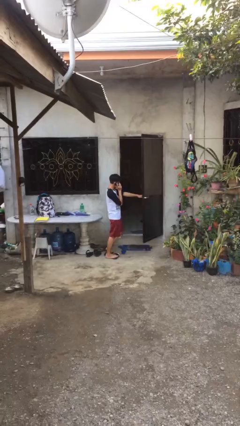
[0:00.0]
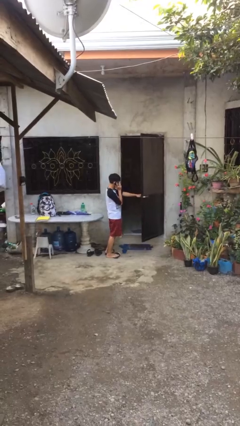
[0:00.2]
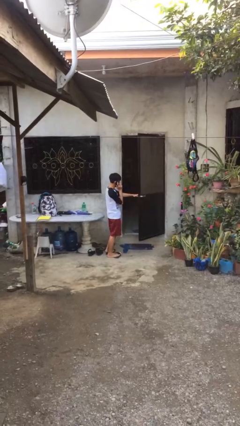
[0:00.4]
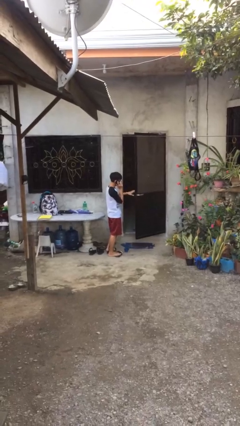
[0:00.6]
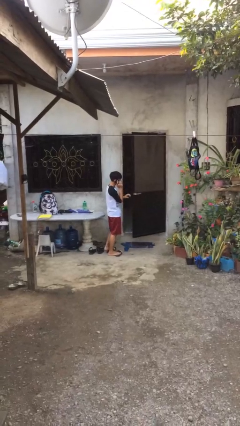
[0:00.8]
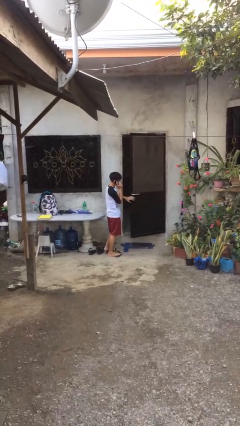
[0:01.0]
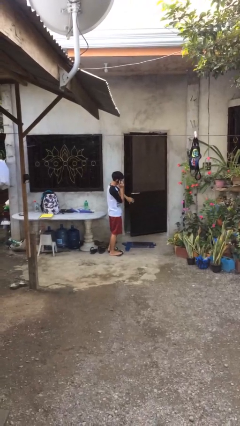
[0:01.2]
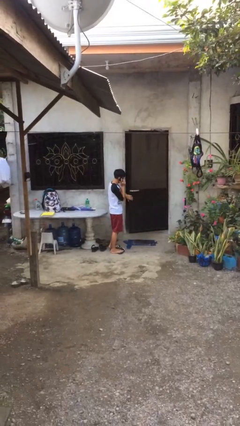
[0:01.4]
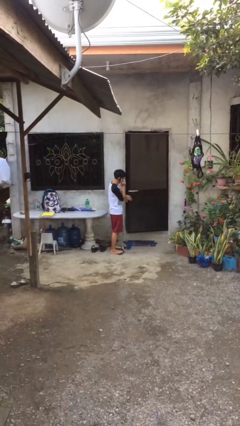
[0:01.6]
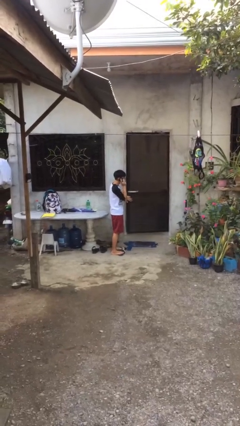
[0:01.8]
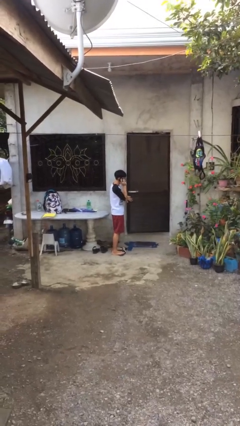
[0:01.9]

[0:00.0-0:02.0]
person closes facility door

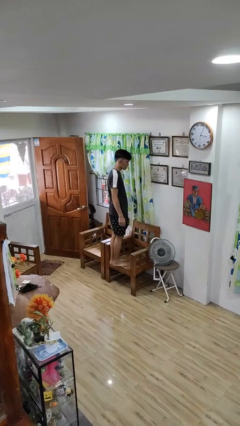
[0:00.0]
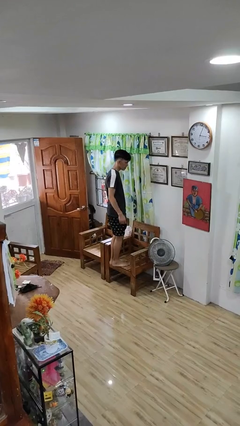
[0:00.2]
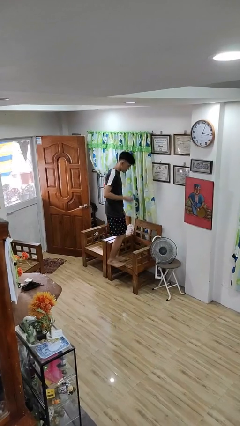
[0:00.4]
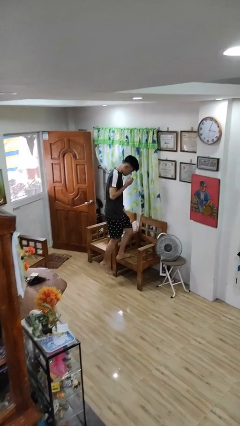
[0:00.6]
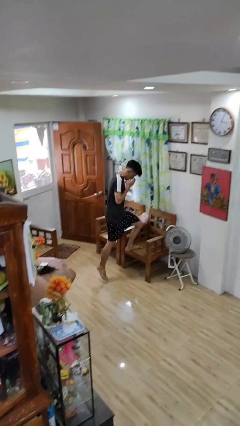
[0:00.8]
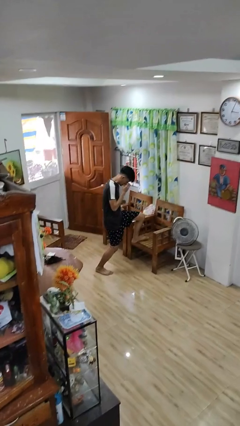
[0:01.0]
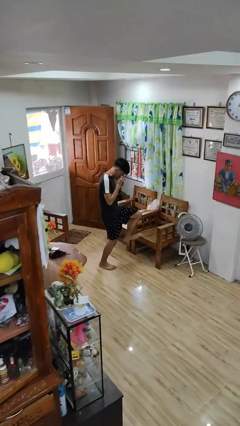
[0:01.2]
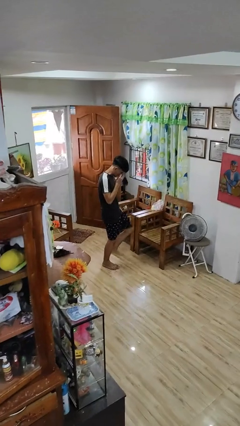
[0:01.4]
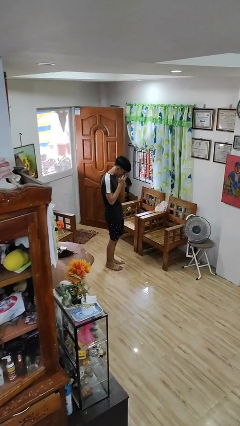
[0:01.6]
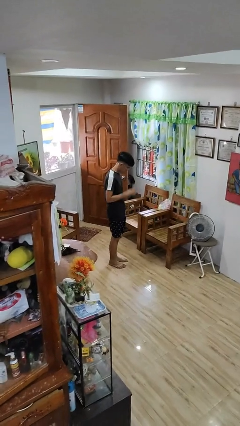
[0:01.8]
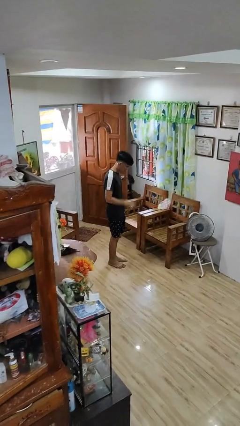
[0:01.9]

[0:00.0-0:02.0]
person climbs off chair

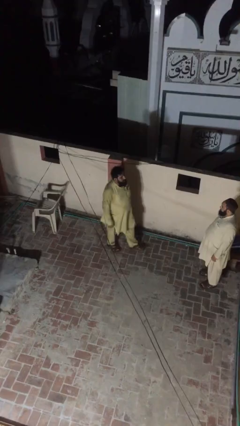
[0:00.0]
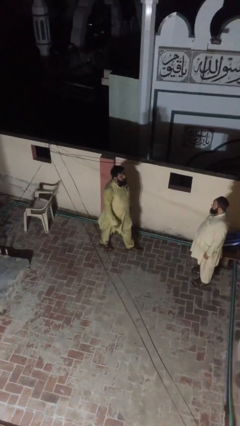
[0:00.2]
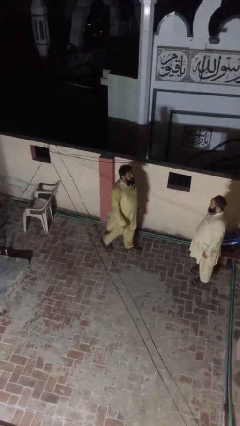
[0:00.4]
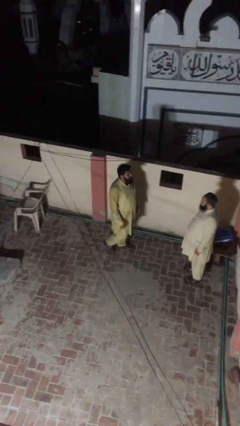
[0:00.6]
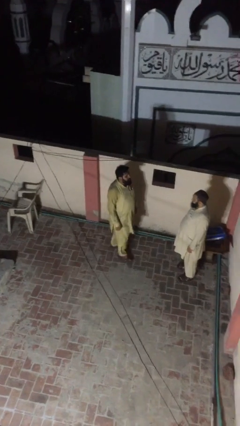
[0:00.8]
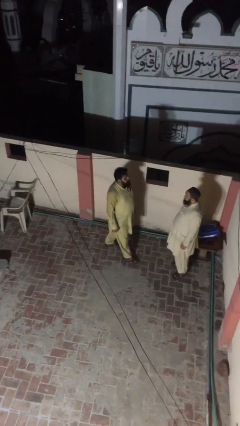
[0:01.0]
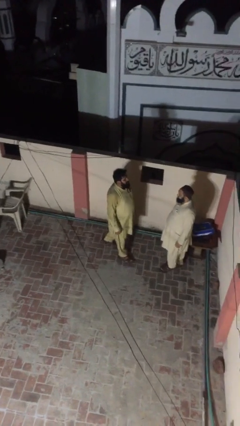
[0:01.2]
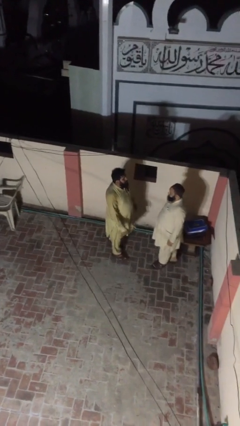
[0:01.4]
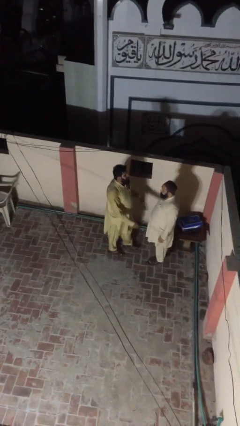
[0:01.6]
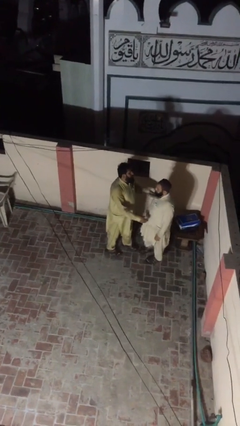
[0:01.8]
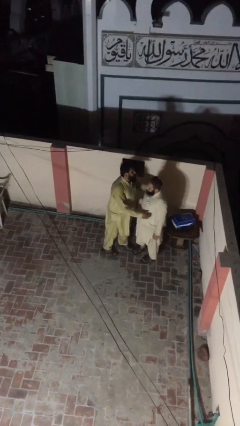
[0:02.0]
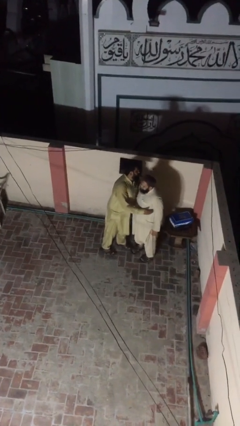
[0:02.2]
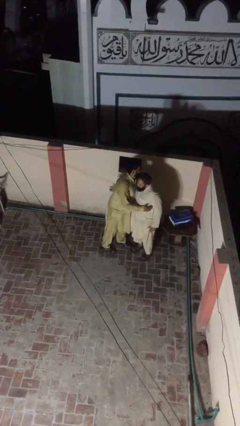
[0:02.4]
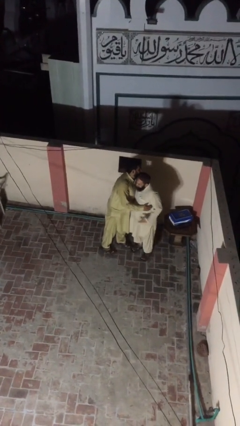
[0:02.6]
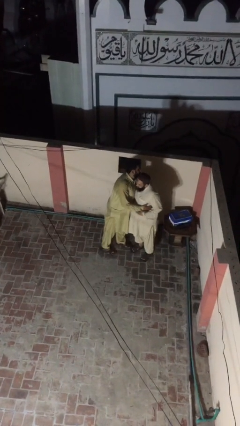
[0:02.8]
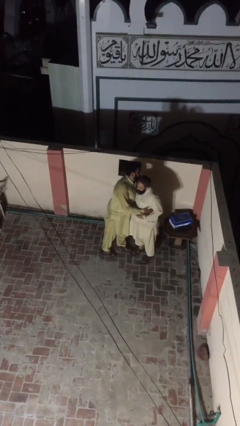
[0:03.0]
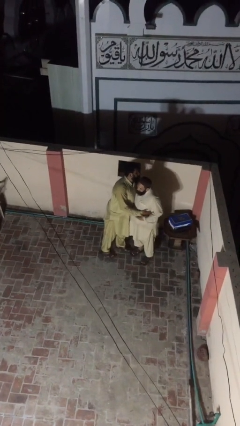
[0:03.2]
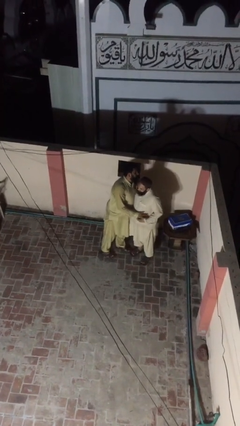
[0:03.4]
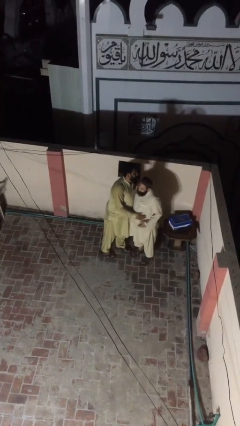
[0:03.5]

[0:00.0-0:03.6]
person embraces person

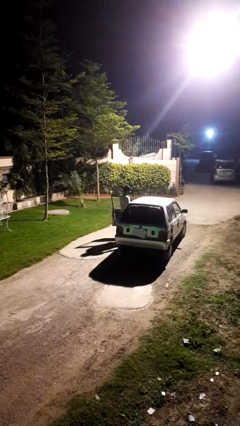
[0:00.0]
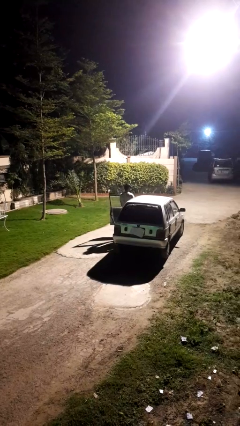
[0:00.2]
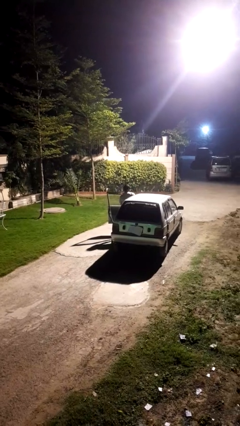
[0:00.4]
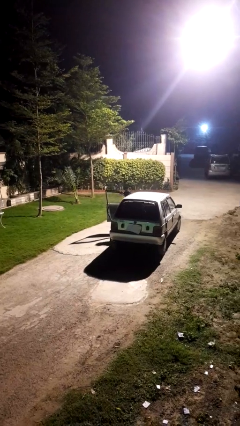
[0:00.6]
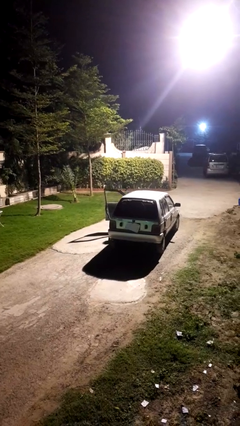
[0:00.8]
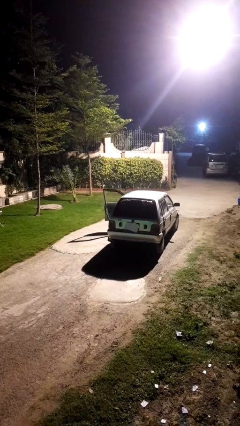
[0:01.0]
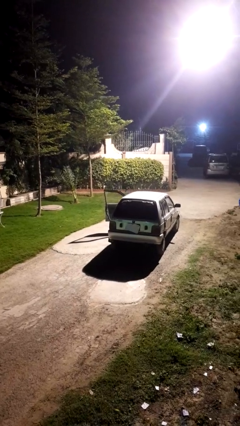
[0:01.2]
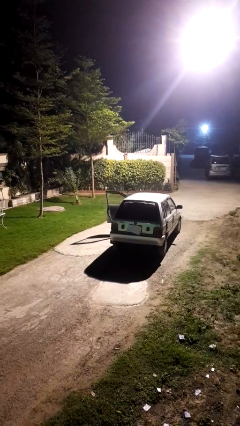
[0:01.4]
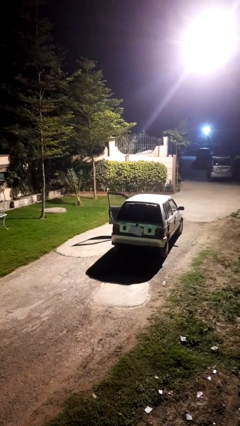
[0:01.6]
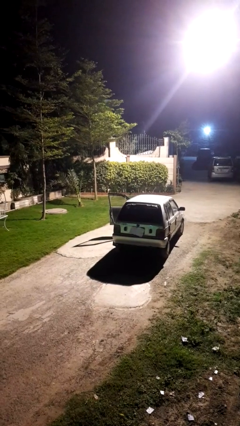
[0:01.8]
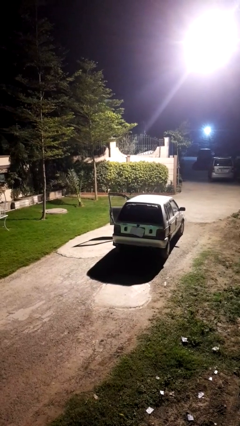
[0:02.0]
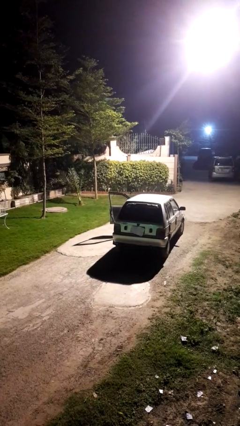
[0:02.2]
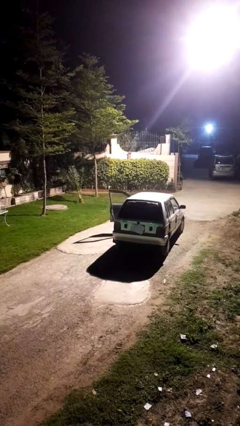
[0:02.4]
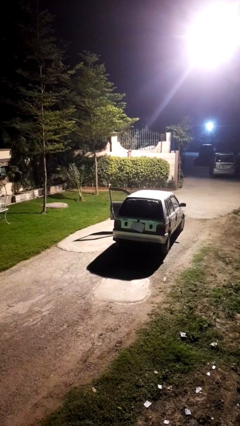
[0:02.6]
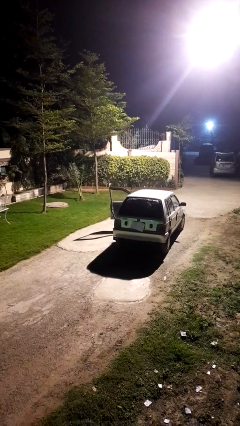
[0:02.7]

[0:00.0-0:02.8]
person enters car

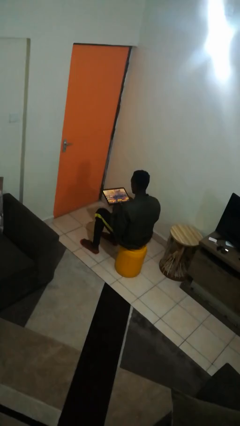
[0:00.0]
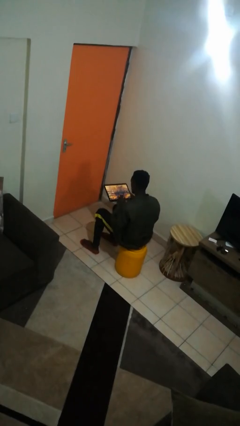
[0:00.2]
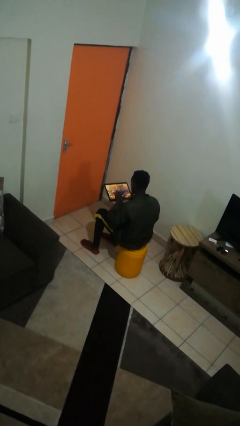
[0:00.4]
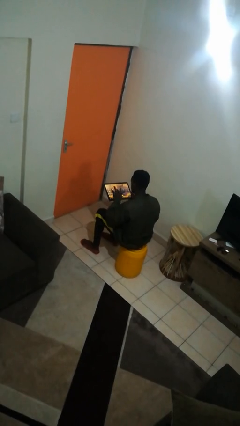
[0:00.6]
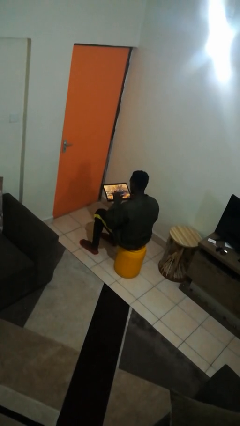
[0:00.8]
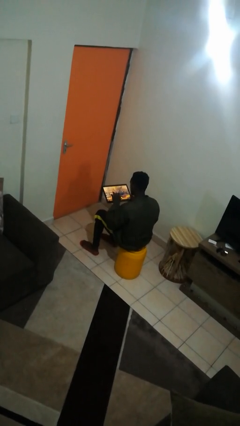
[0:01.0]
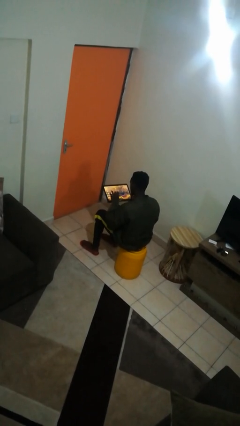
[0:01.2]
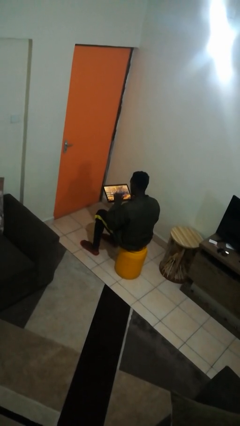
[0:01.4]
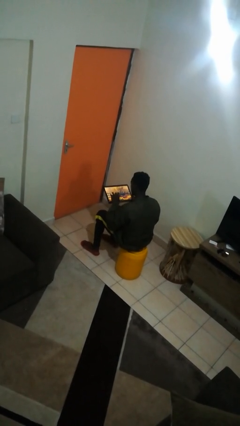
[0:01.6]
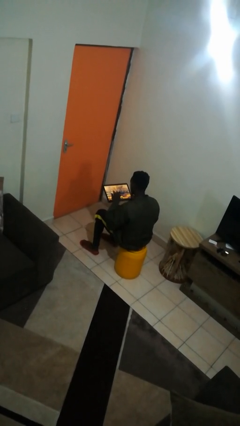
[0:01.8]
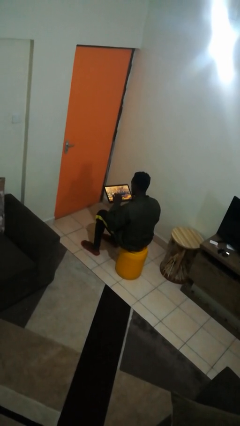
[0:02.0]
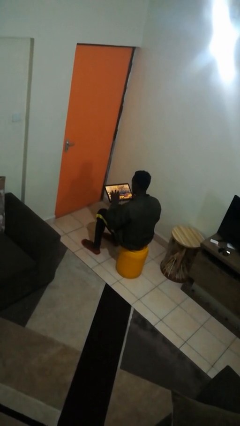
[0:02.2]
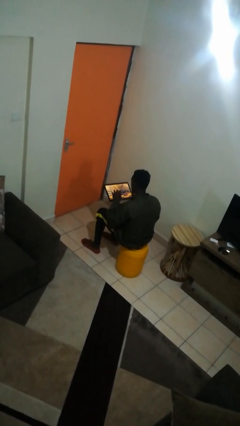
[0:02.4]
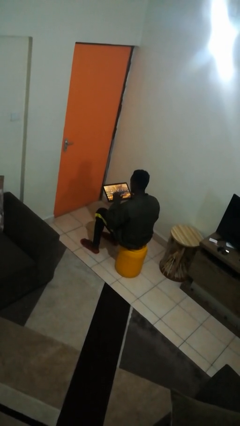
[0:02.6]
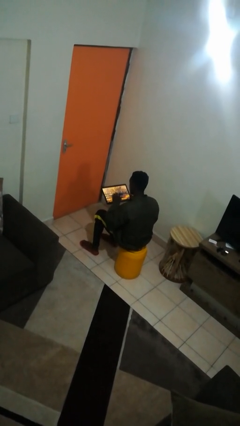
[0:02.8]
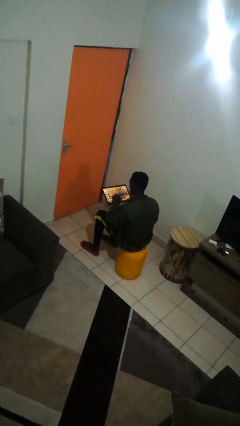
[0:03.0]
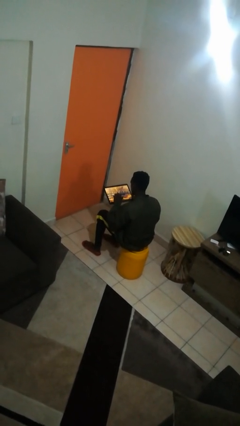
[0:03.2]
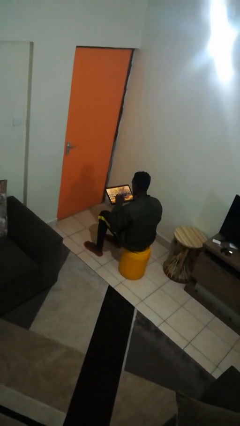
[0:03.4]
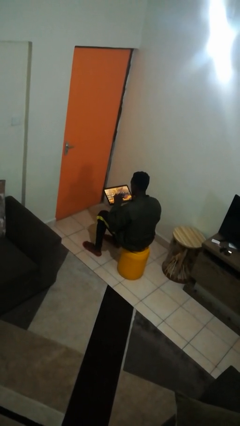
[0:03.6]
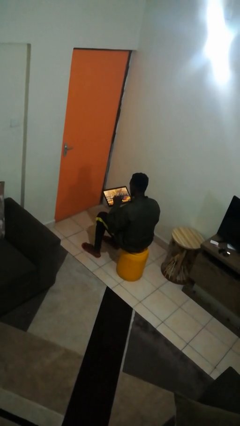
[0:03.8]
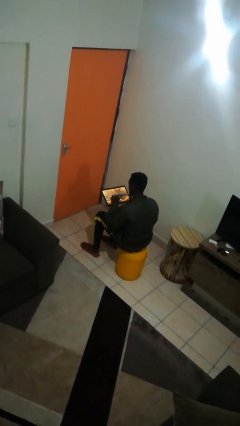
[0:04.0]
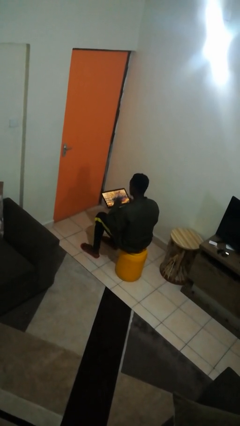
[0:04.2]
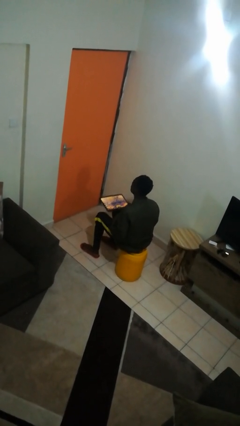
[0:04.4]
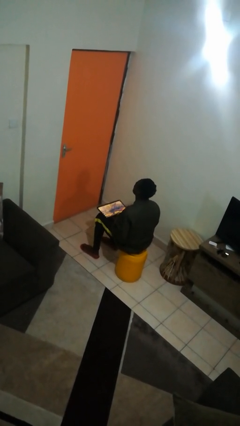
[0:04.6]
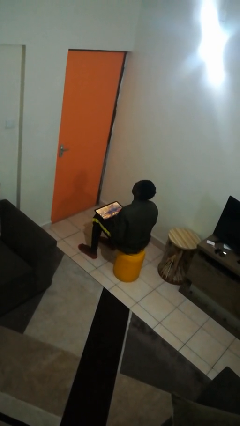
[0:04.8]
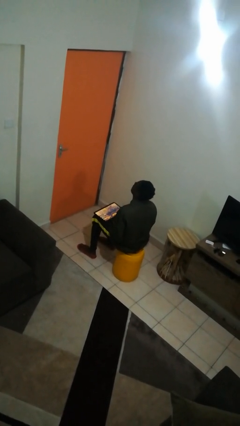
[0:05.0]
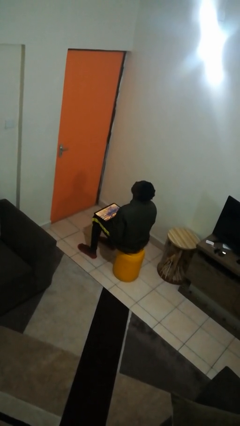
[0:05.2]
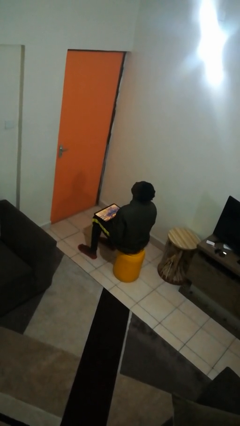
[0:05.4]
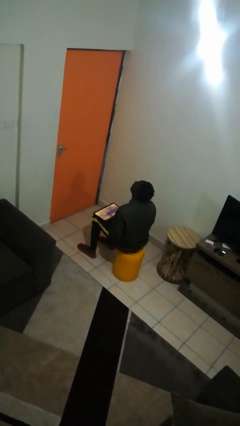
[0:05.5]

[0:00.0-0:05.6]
person interacts with tablet

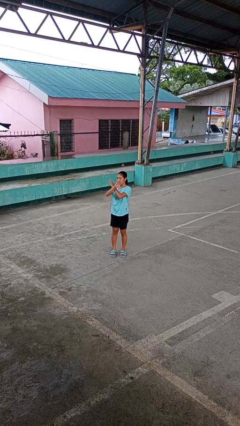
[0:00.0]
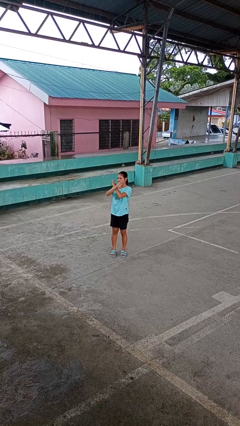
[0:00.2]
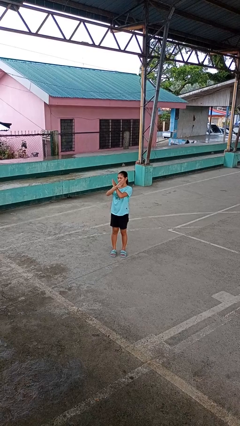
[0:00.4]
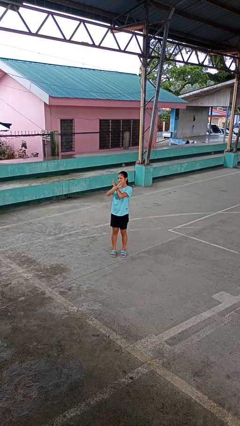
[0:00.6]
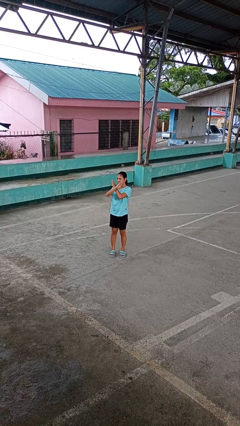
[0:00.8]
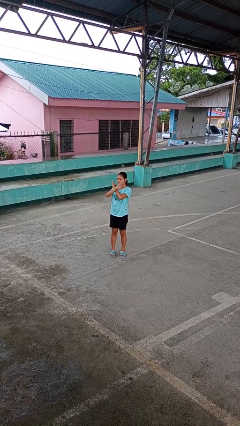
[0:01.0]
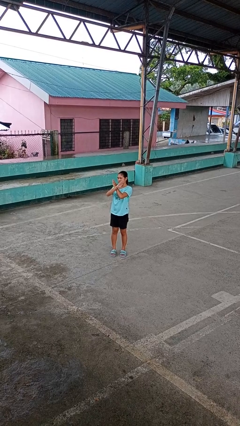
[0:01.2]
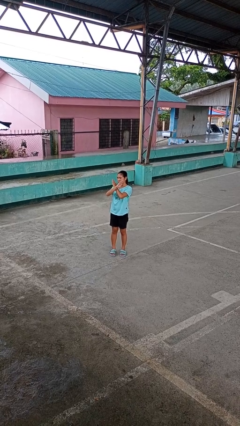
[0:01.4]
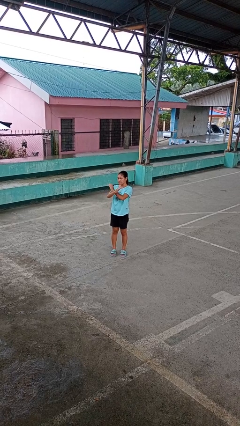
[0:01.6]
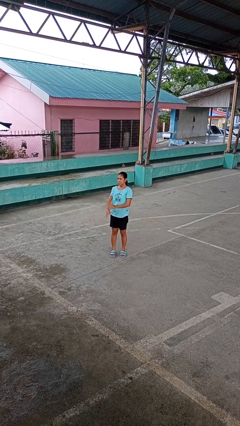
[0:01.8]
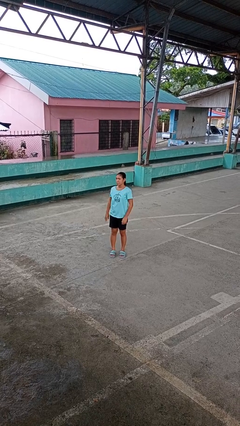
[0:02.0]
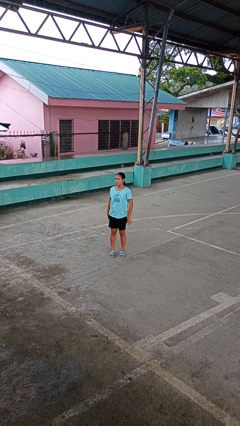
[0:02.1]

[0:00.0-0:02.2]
person gestures arms x
